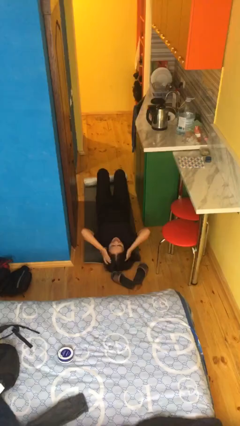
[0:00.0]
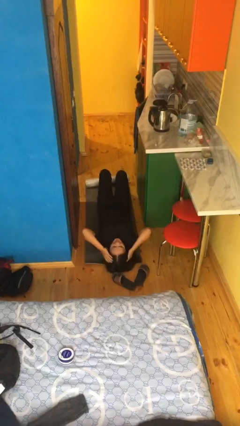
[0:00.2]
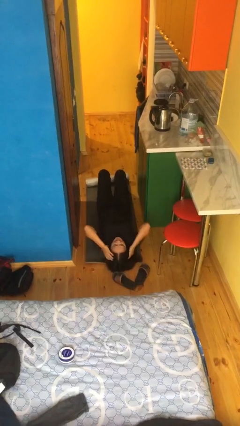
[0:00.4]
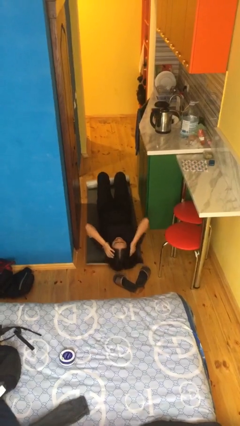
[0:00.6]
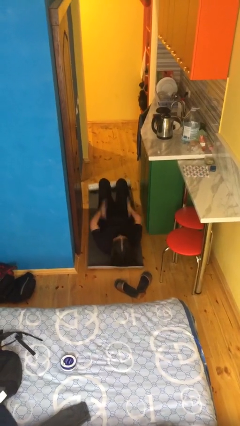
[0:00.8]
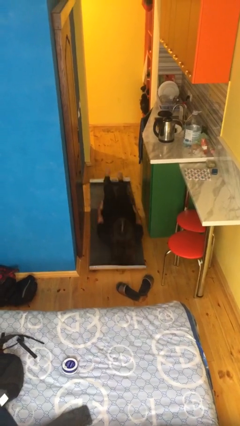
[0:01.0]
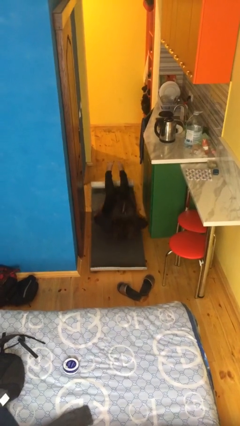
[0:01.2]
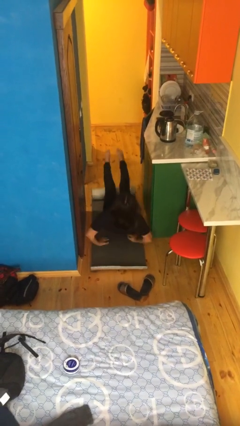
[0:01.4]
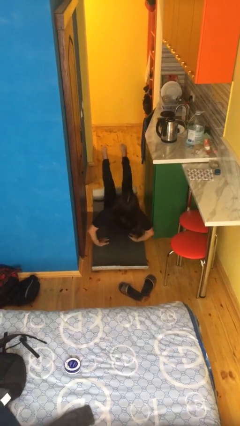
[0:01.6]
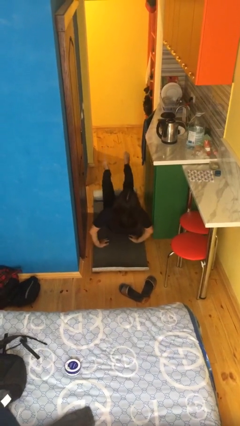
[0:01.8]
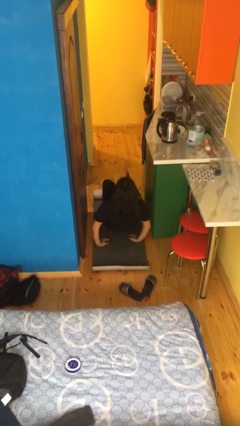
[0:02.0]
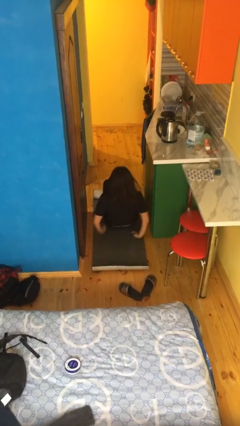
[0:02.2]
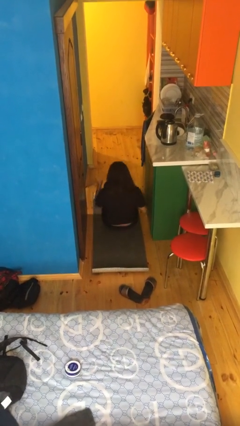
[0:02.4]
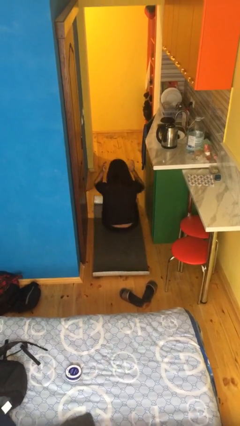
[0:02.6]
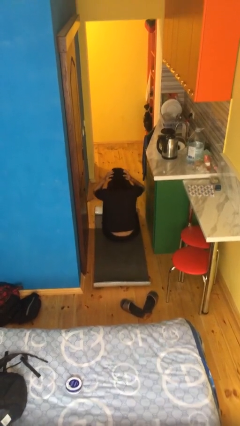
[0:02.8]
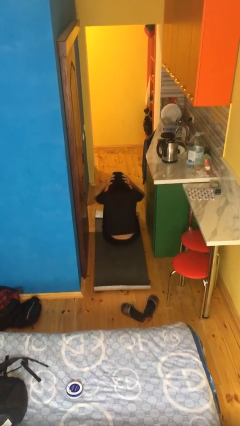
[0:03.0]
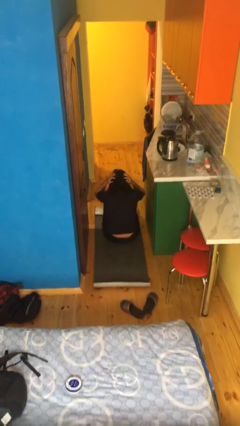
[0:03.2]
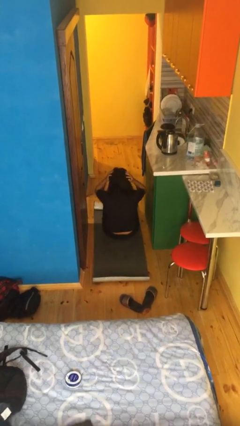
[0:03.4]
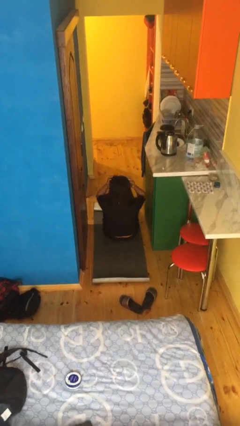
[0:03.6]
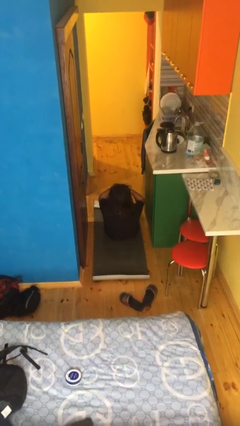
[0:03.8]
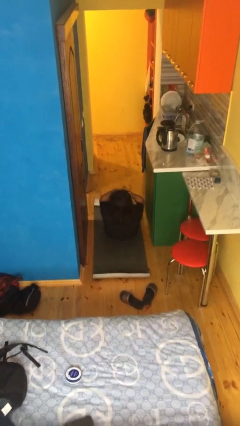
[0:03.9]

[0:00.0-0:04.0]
person exercises with situp

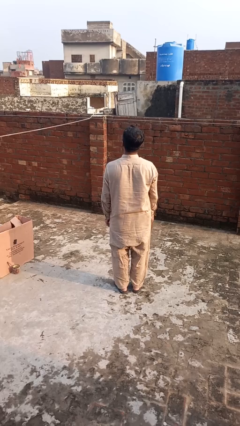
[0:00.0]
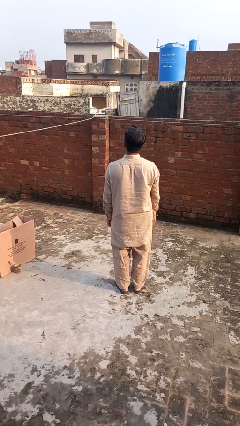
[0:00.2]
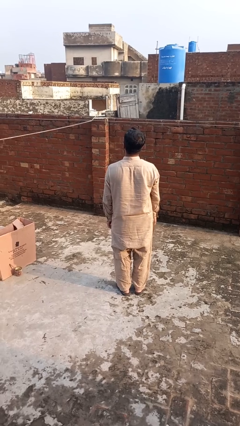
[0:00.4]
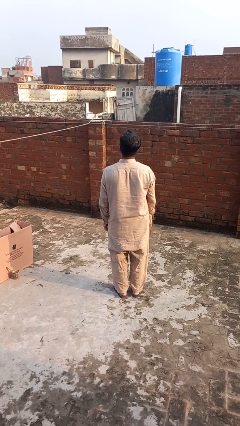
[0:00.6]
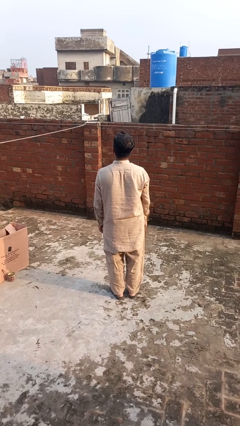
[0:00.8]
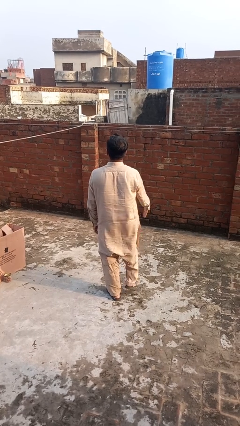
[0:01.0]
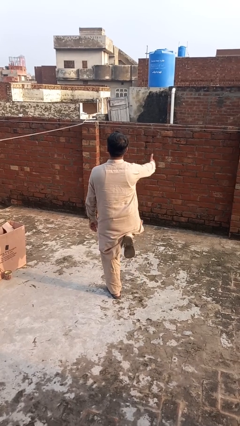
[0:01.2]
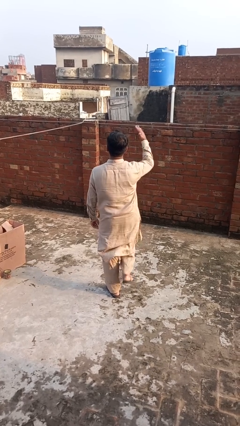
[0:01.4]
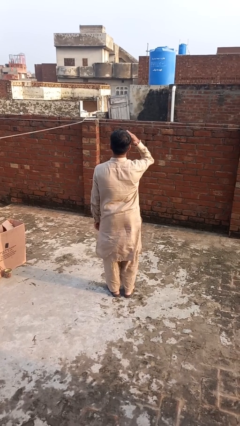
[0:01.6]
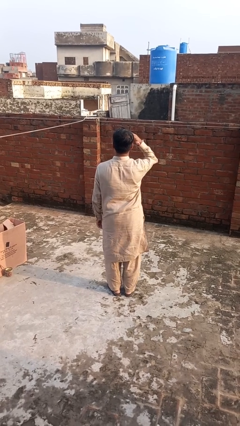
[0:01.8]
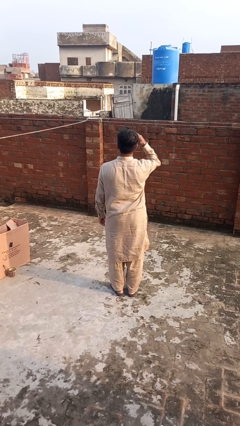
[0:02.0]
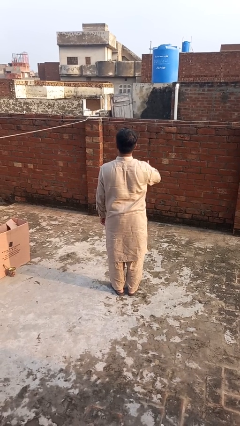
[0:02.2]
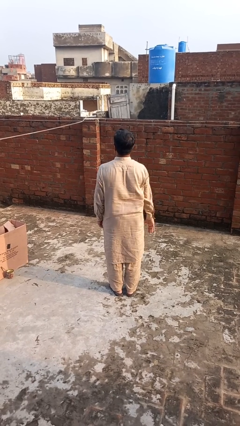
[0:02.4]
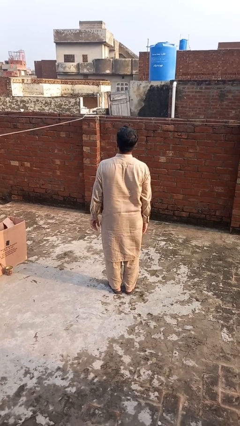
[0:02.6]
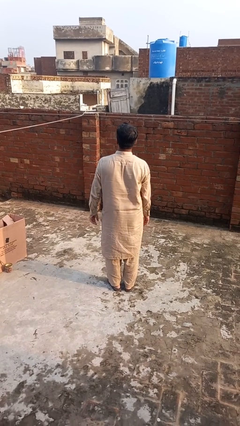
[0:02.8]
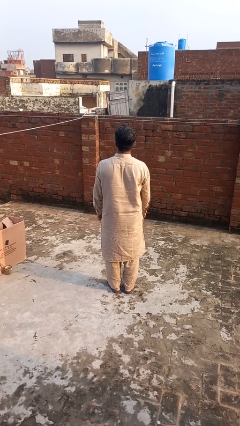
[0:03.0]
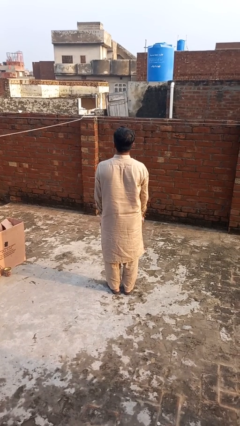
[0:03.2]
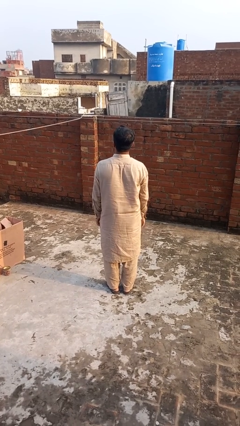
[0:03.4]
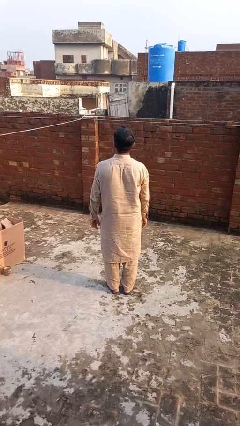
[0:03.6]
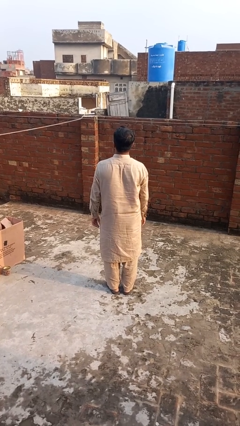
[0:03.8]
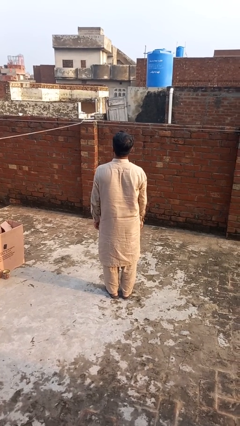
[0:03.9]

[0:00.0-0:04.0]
person salutes

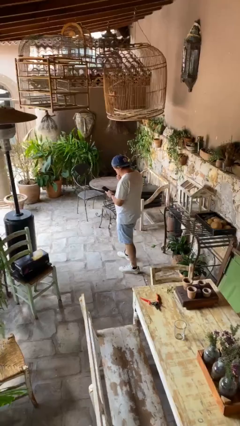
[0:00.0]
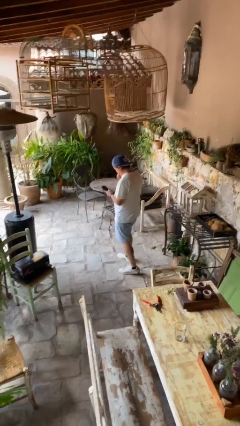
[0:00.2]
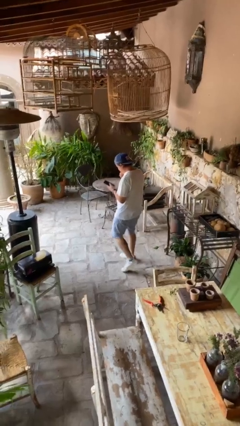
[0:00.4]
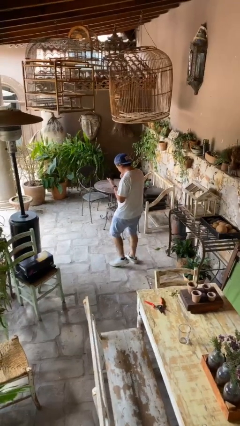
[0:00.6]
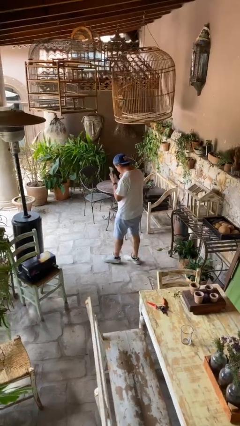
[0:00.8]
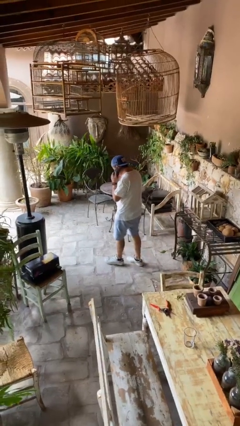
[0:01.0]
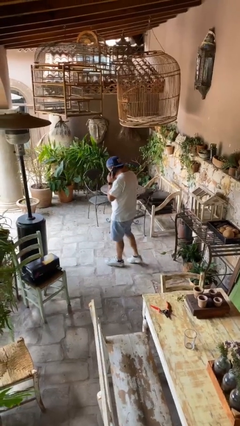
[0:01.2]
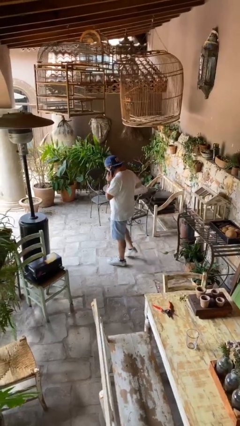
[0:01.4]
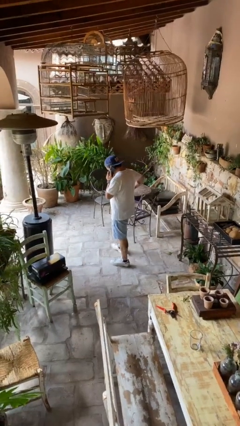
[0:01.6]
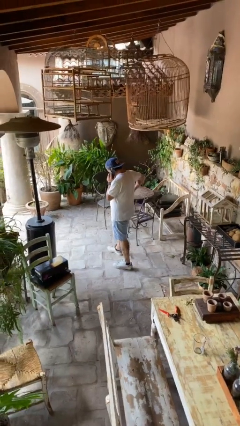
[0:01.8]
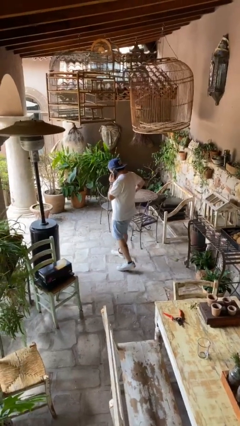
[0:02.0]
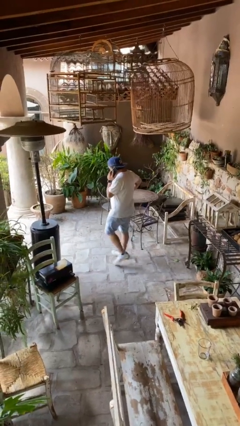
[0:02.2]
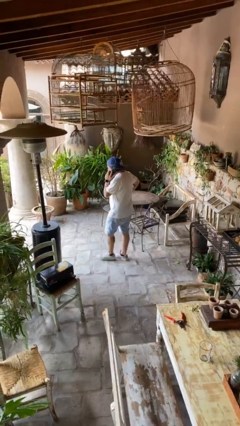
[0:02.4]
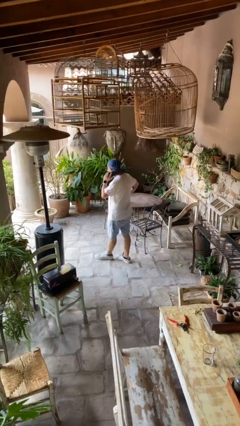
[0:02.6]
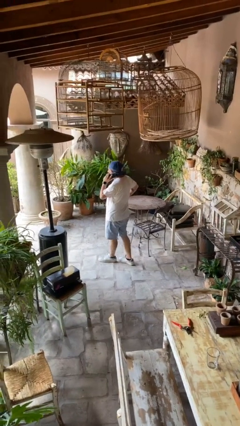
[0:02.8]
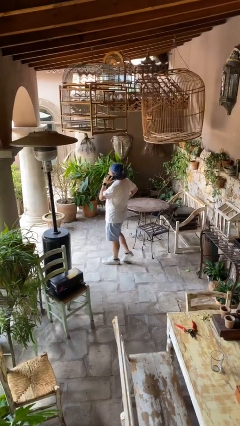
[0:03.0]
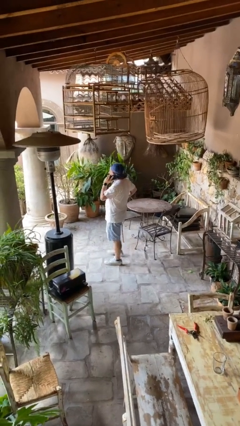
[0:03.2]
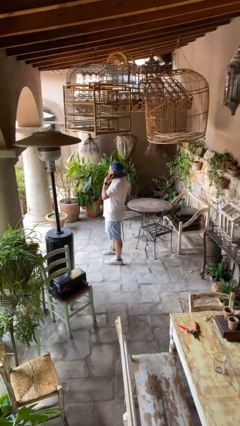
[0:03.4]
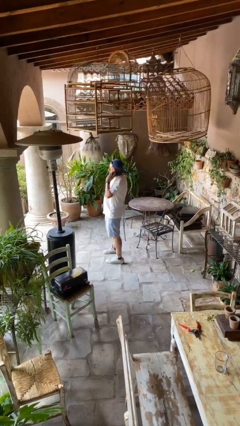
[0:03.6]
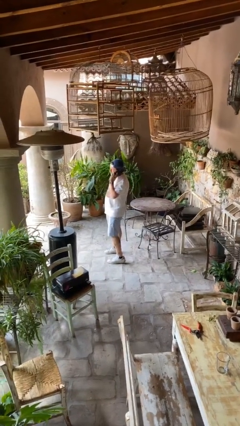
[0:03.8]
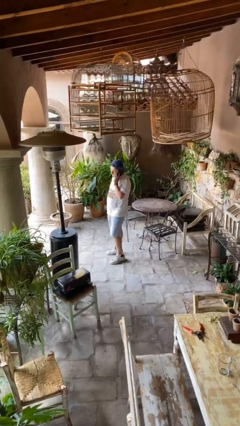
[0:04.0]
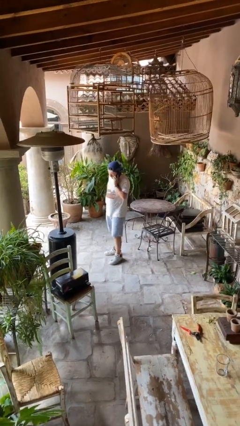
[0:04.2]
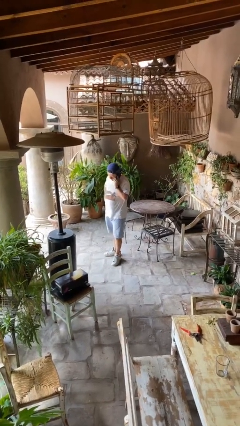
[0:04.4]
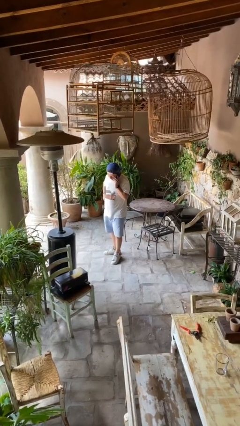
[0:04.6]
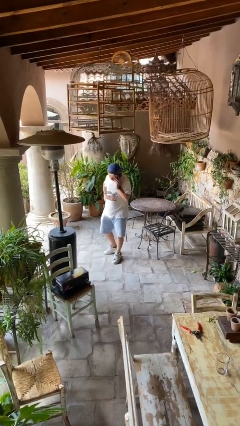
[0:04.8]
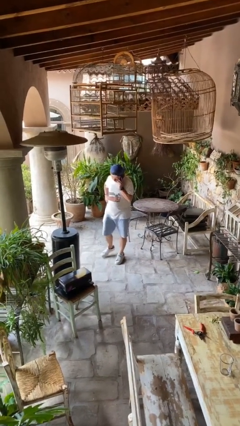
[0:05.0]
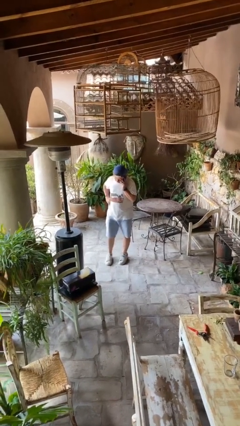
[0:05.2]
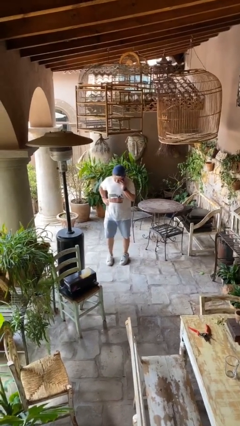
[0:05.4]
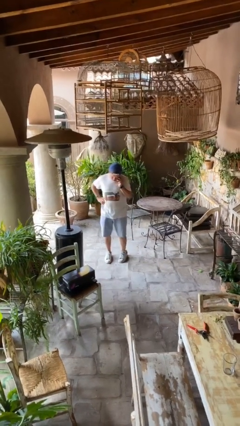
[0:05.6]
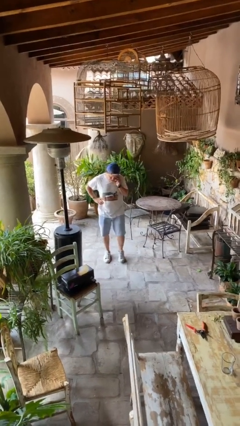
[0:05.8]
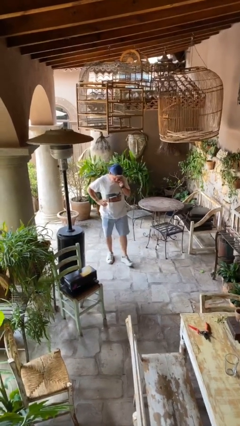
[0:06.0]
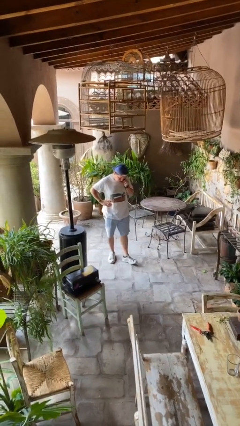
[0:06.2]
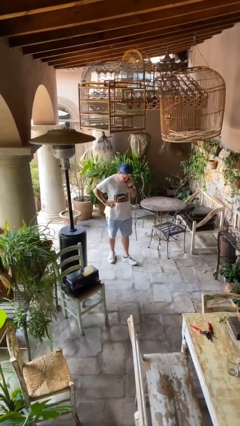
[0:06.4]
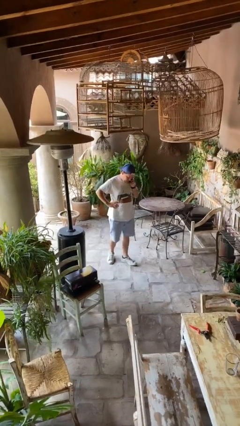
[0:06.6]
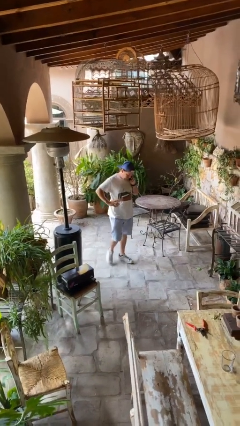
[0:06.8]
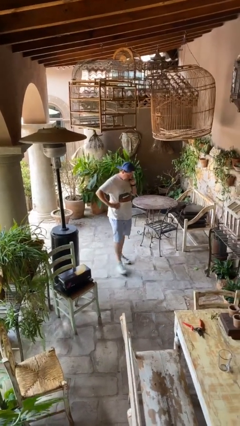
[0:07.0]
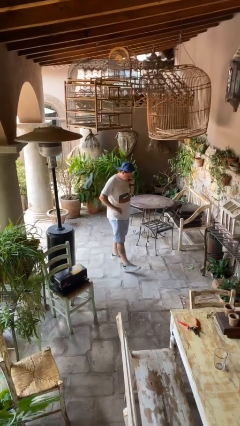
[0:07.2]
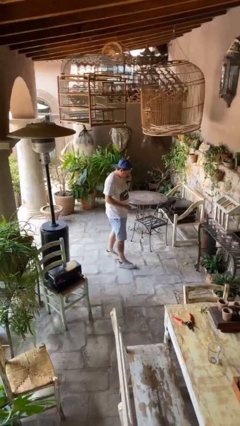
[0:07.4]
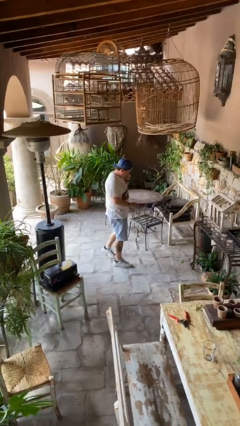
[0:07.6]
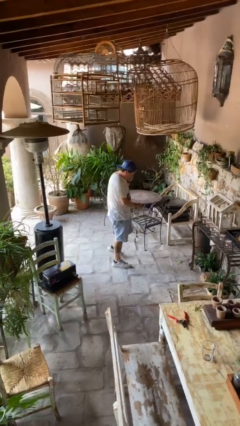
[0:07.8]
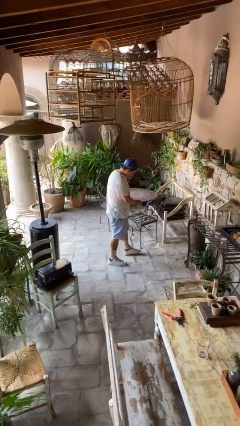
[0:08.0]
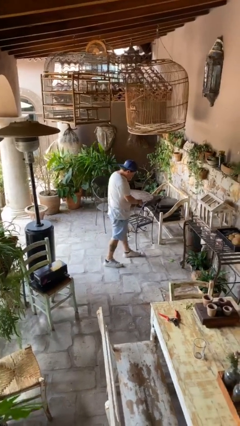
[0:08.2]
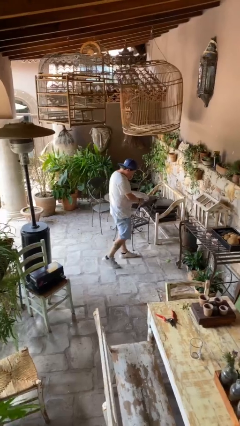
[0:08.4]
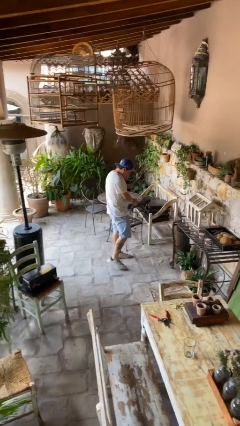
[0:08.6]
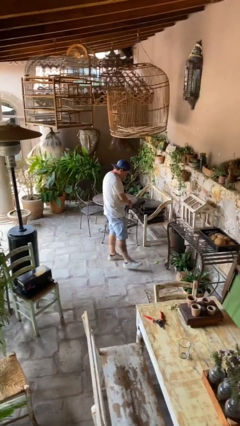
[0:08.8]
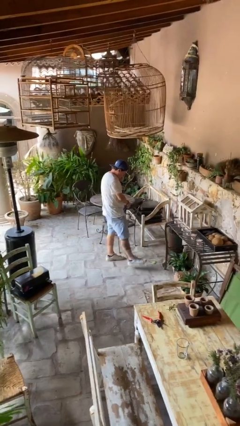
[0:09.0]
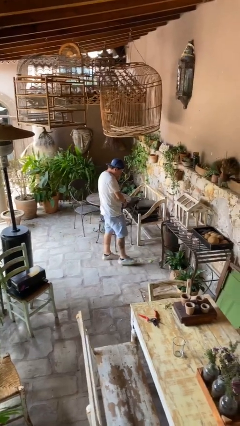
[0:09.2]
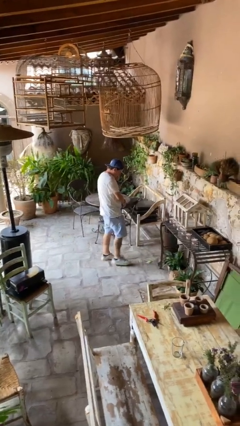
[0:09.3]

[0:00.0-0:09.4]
person talks on phone
